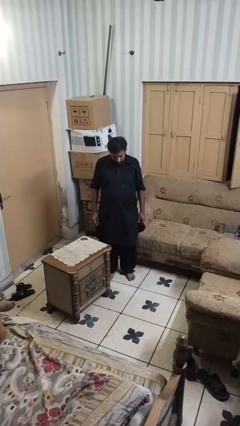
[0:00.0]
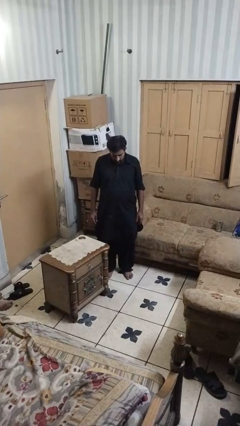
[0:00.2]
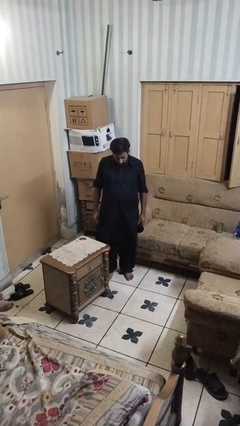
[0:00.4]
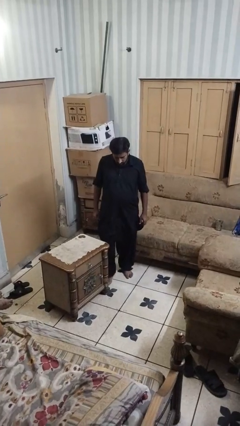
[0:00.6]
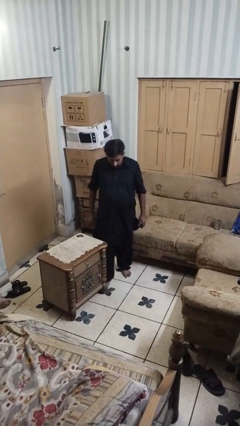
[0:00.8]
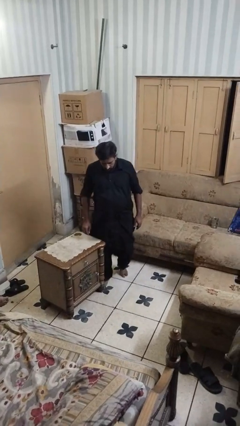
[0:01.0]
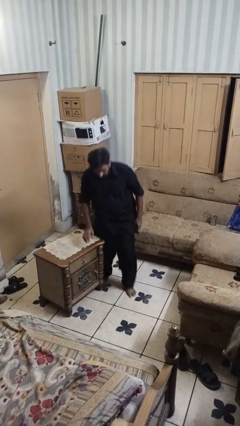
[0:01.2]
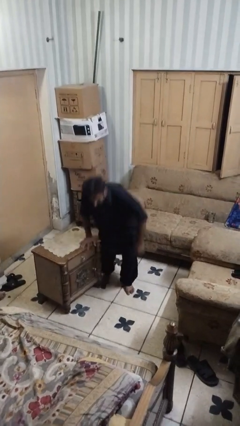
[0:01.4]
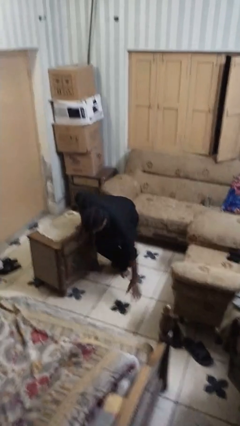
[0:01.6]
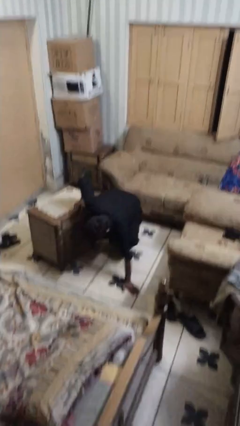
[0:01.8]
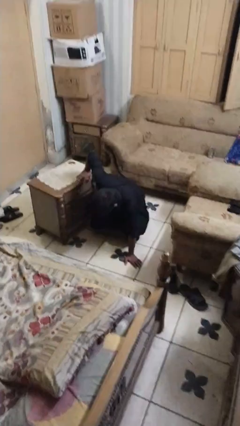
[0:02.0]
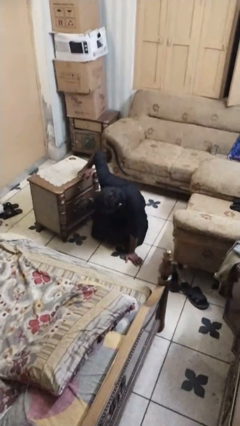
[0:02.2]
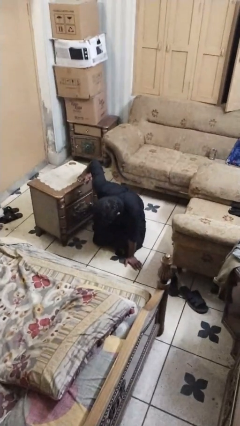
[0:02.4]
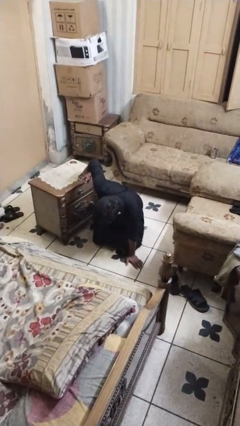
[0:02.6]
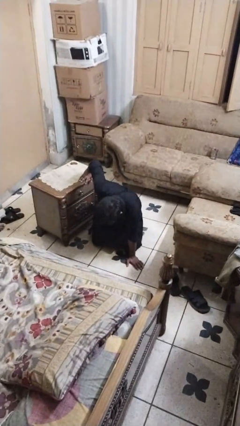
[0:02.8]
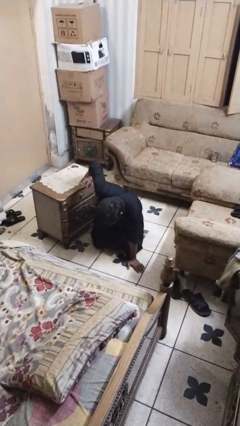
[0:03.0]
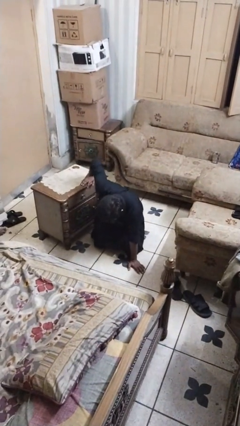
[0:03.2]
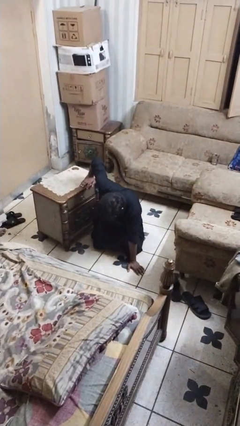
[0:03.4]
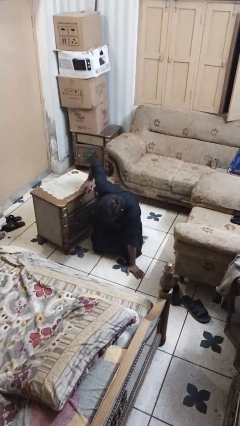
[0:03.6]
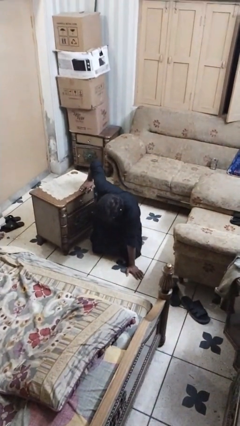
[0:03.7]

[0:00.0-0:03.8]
person bumps into table

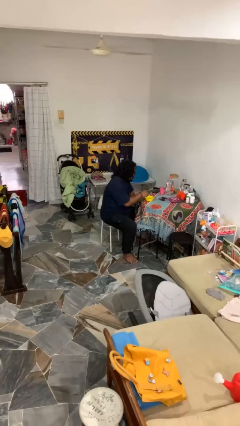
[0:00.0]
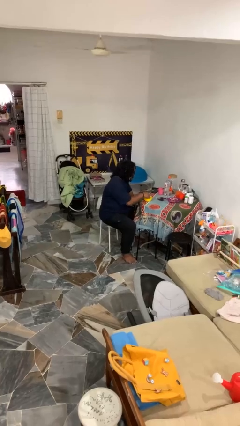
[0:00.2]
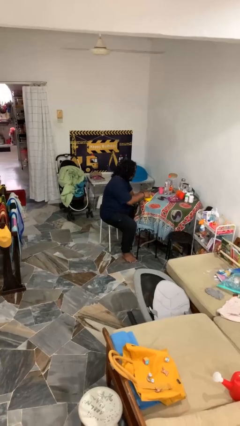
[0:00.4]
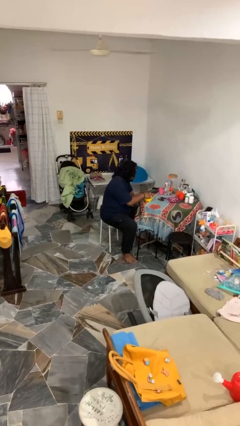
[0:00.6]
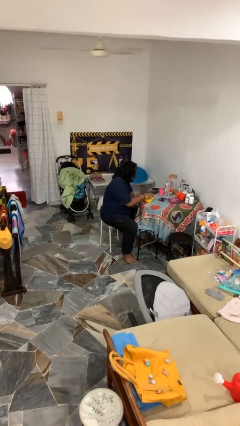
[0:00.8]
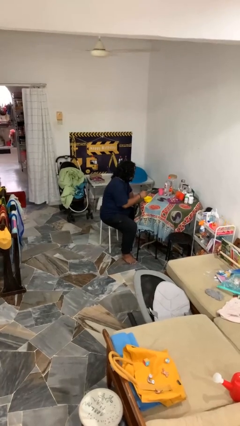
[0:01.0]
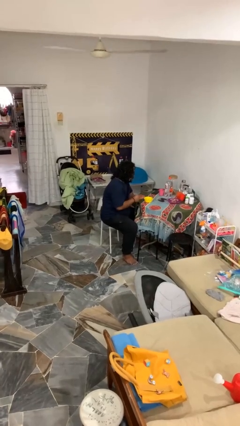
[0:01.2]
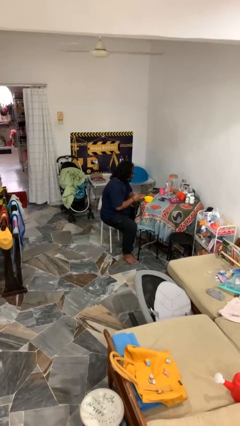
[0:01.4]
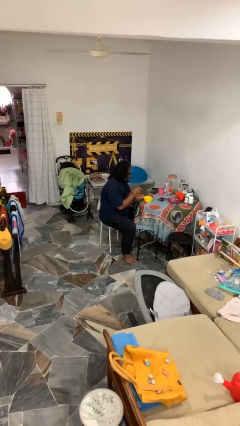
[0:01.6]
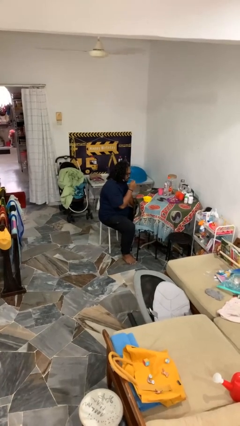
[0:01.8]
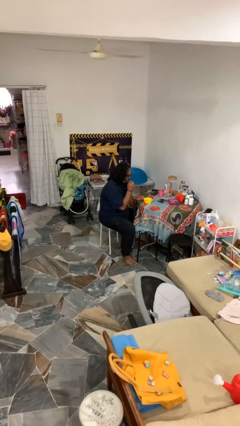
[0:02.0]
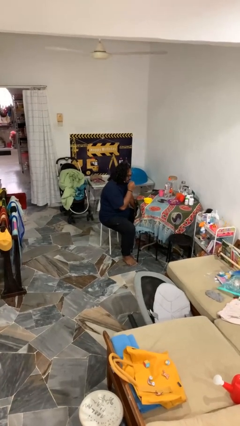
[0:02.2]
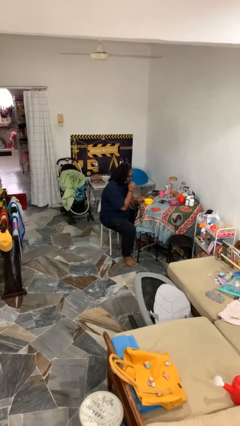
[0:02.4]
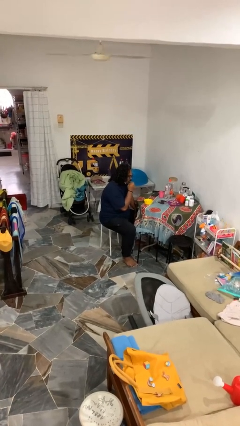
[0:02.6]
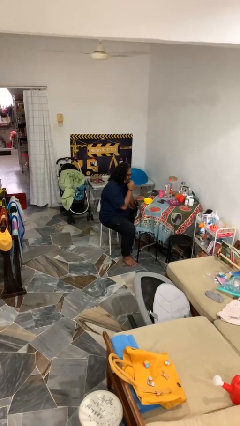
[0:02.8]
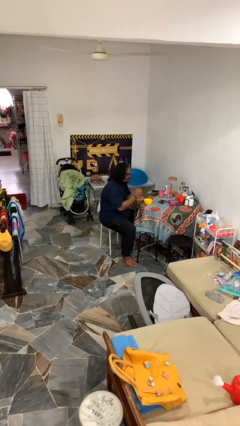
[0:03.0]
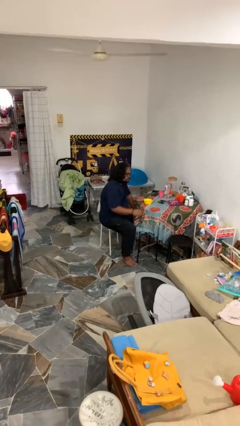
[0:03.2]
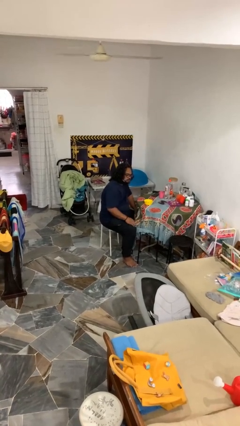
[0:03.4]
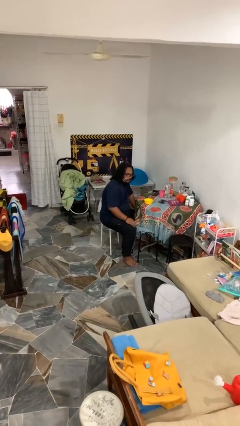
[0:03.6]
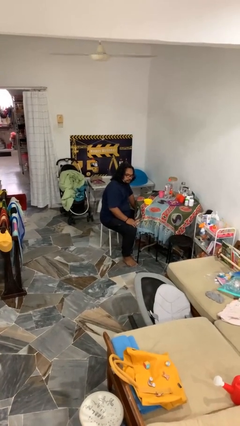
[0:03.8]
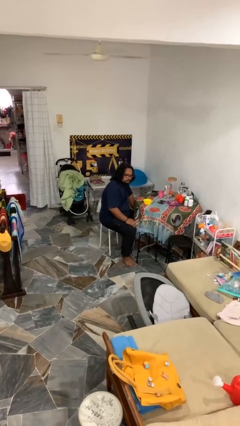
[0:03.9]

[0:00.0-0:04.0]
person eats with hands

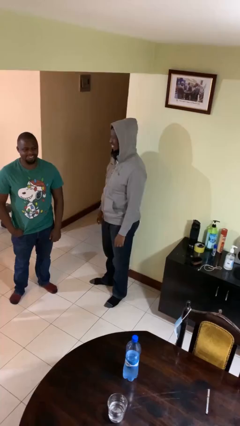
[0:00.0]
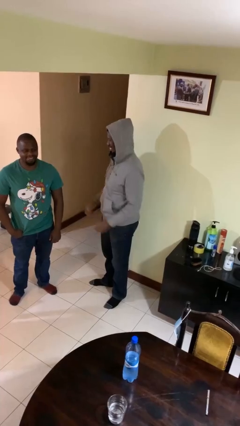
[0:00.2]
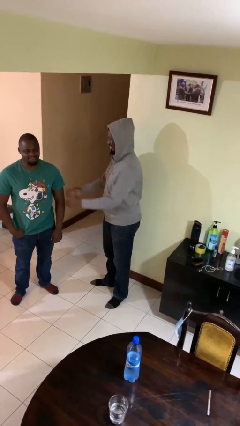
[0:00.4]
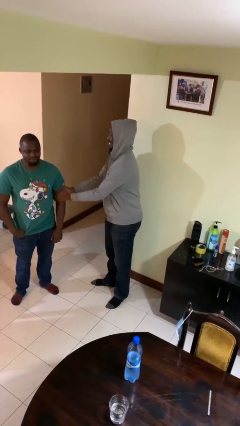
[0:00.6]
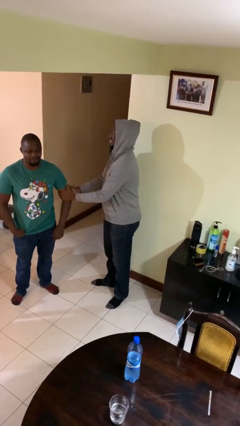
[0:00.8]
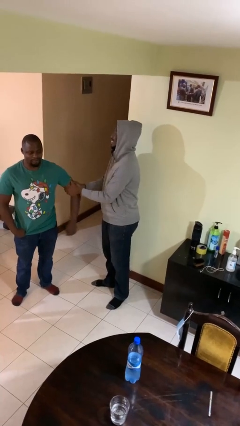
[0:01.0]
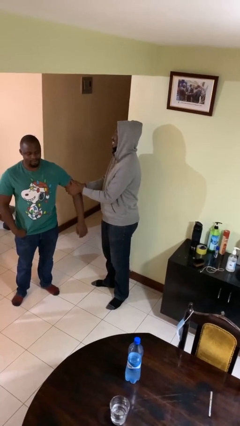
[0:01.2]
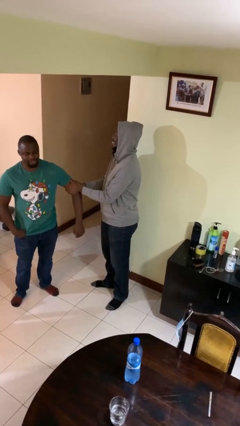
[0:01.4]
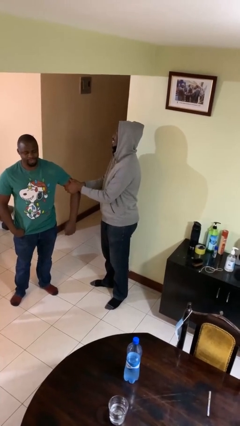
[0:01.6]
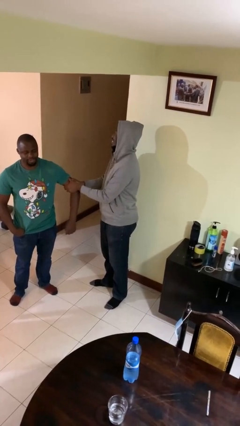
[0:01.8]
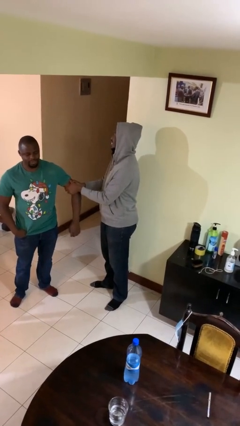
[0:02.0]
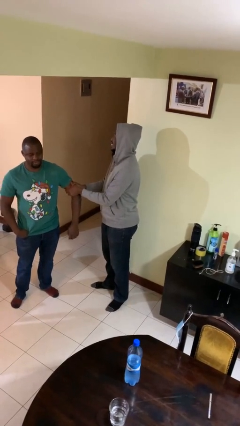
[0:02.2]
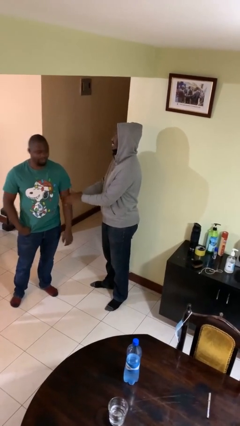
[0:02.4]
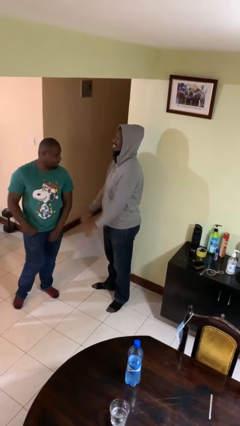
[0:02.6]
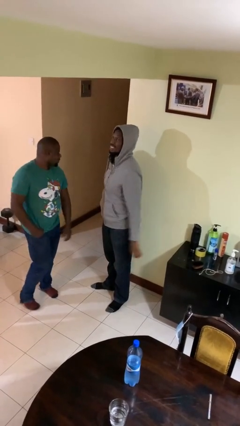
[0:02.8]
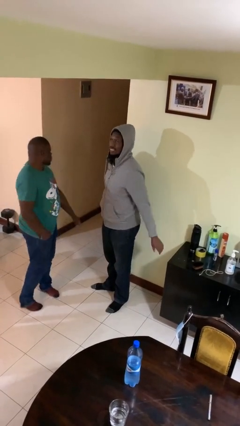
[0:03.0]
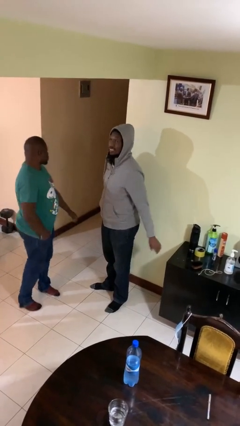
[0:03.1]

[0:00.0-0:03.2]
person grabs person by bicep

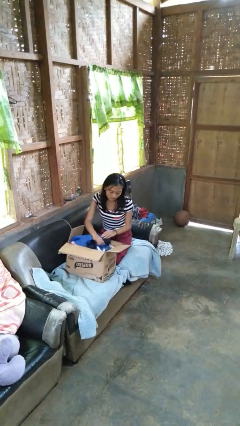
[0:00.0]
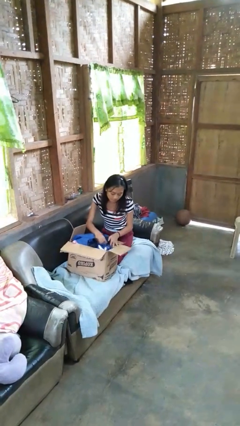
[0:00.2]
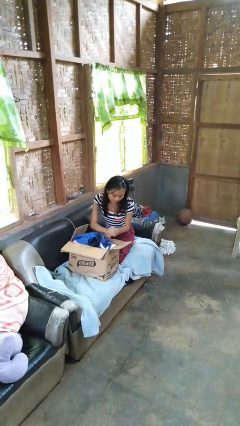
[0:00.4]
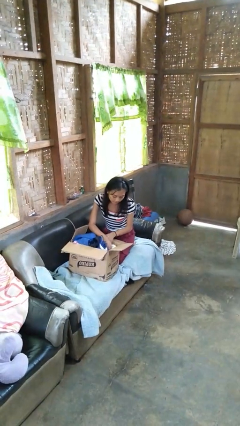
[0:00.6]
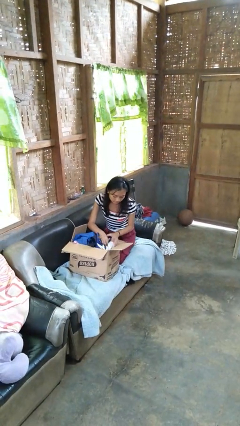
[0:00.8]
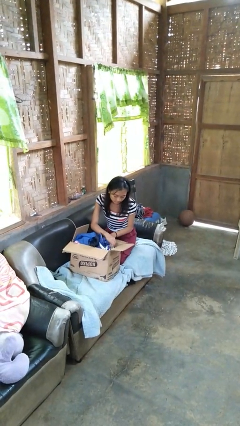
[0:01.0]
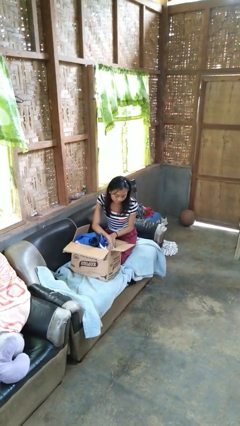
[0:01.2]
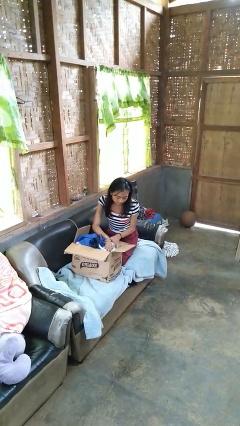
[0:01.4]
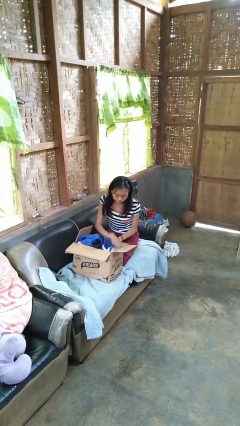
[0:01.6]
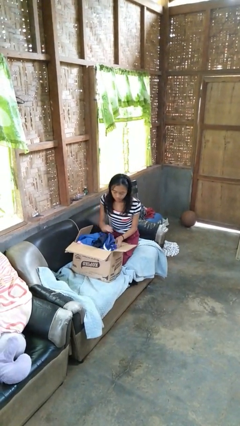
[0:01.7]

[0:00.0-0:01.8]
person searches in box

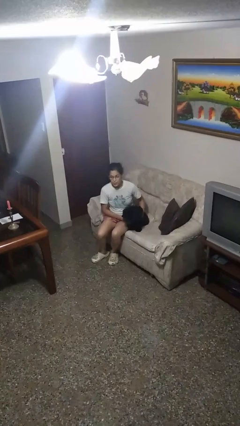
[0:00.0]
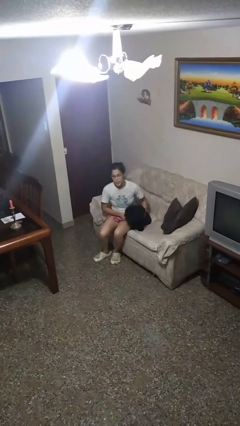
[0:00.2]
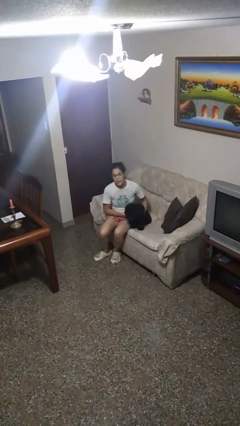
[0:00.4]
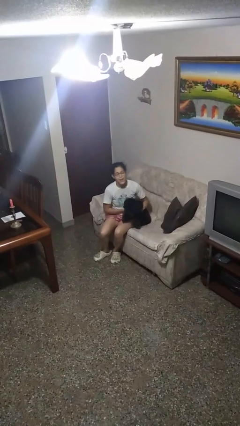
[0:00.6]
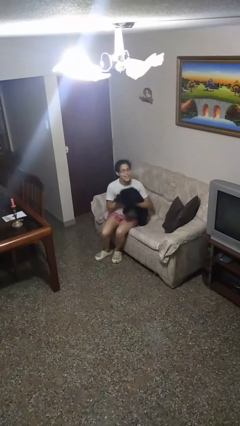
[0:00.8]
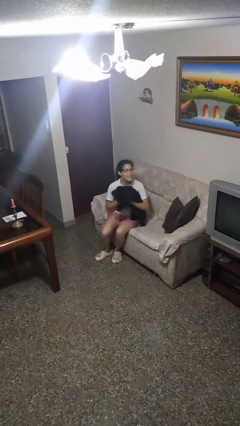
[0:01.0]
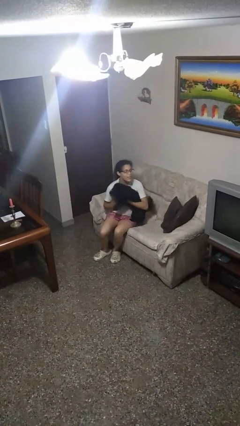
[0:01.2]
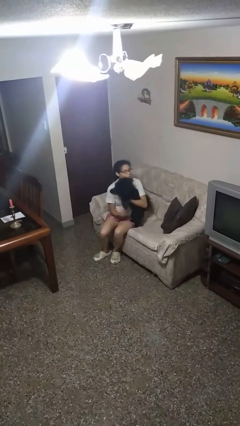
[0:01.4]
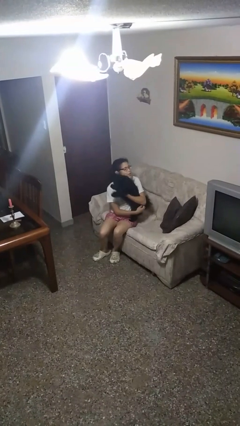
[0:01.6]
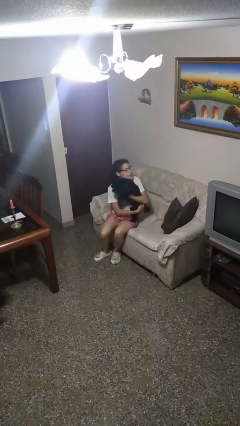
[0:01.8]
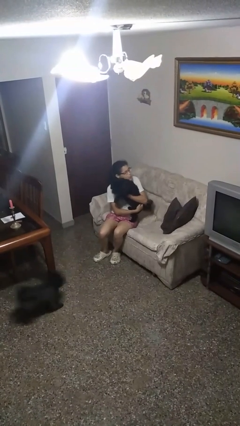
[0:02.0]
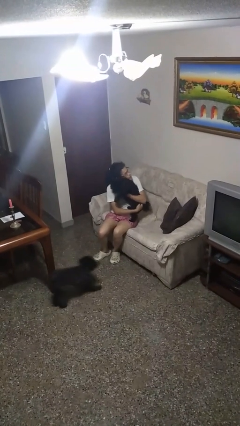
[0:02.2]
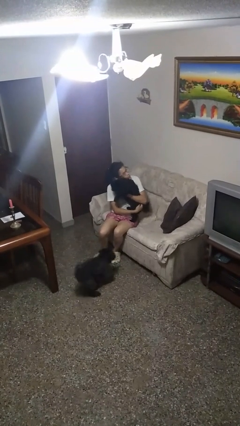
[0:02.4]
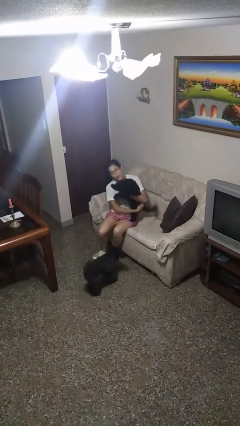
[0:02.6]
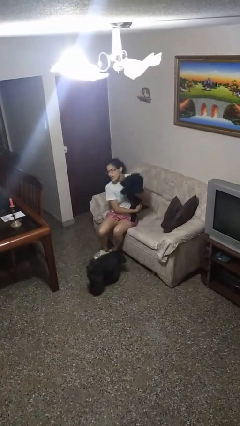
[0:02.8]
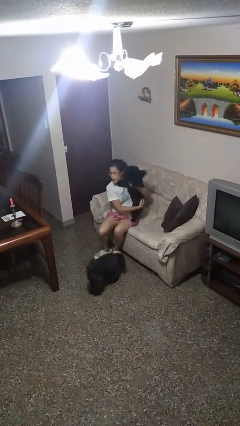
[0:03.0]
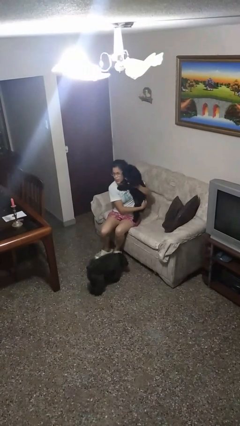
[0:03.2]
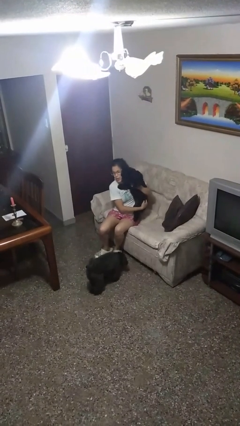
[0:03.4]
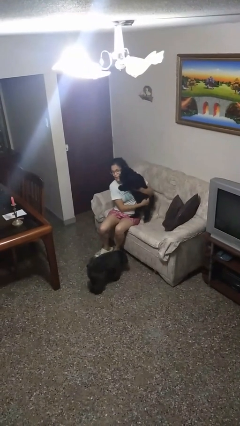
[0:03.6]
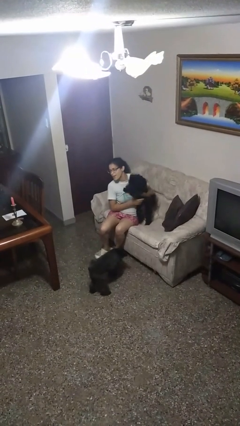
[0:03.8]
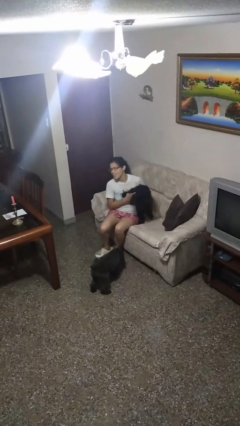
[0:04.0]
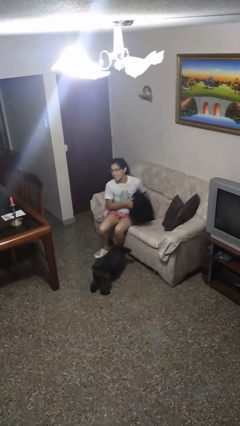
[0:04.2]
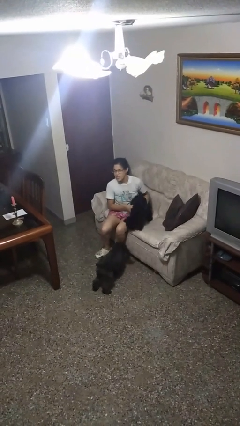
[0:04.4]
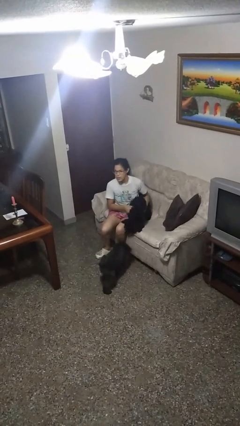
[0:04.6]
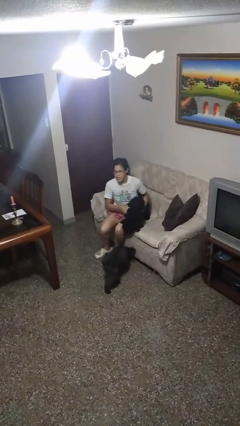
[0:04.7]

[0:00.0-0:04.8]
person hugs dog
